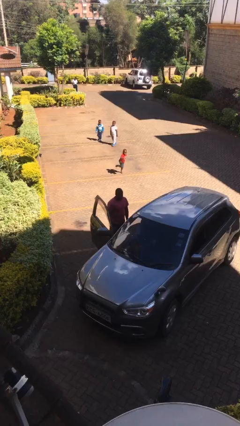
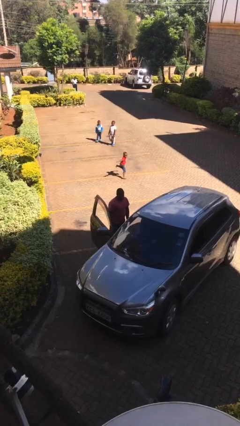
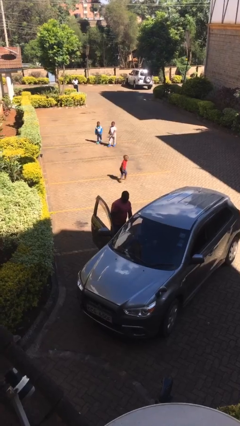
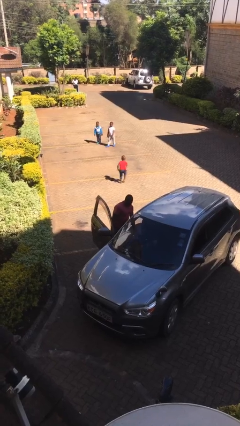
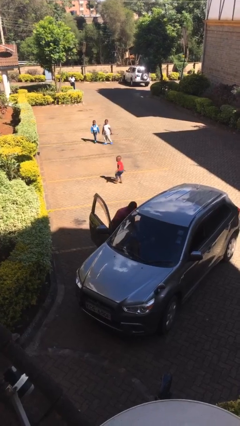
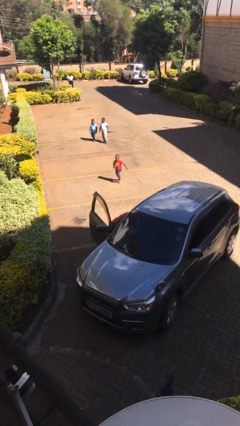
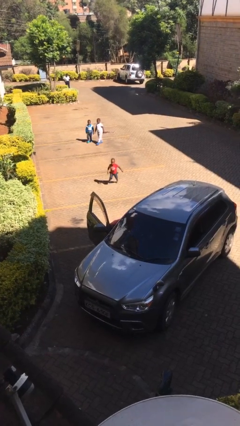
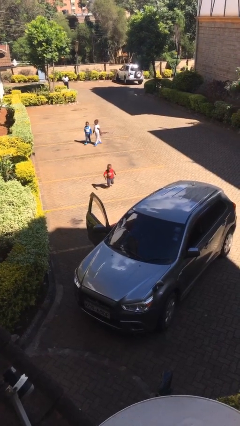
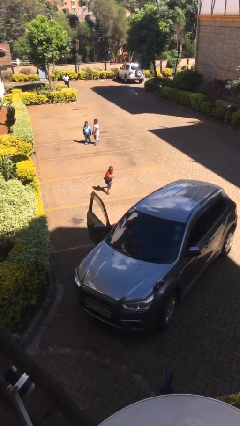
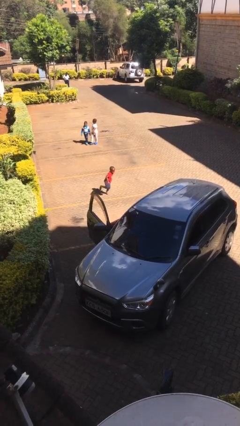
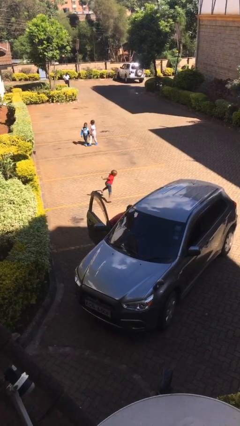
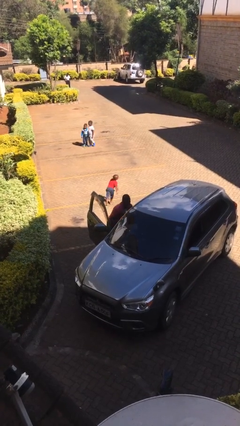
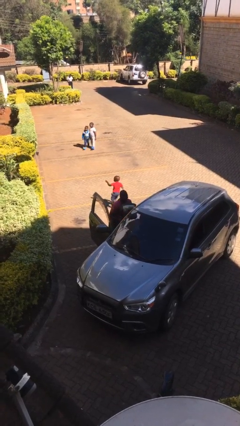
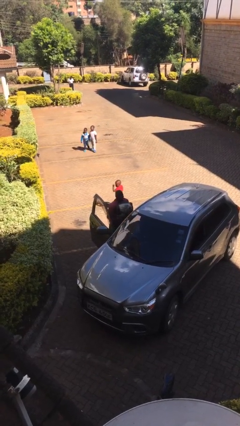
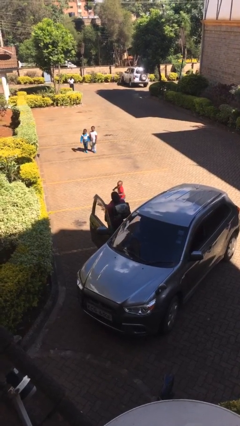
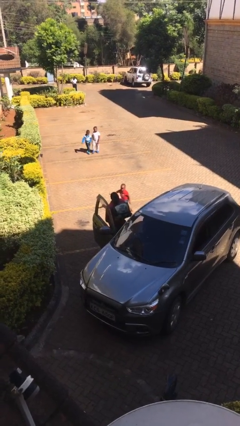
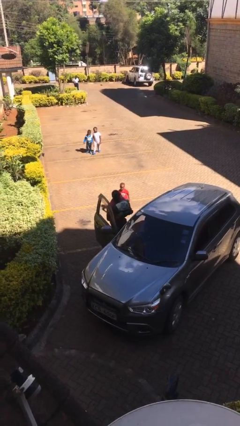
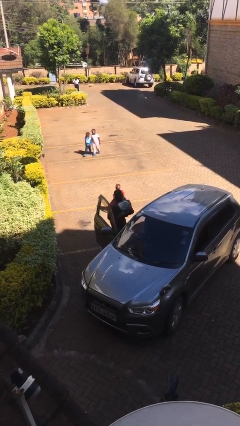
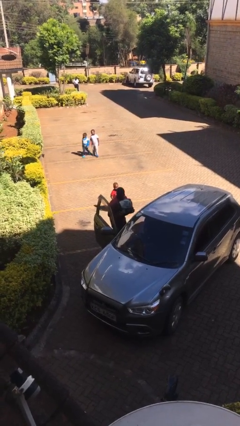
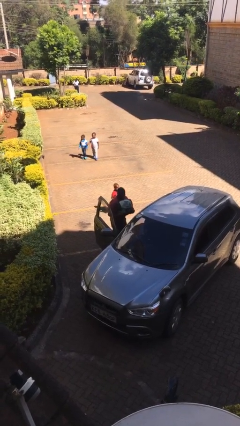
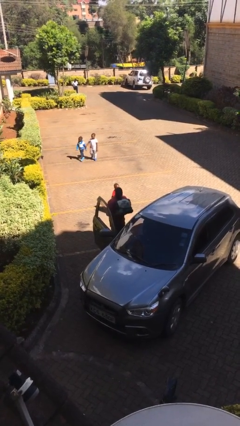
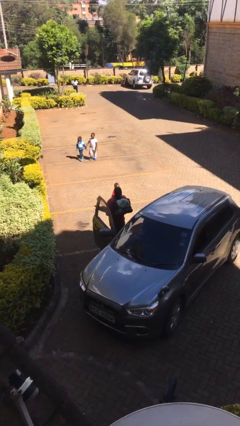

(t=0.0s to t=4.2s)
person unloads car

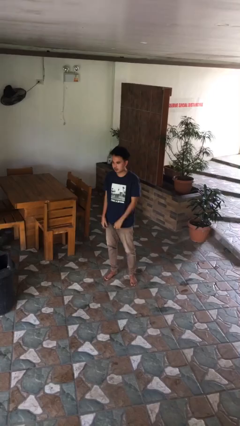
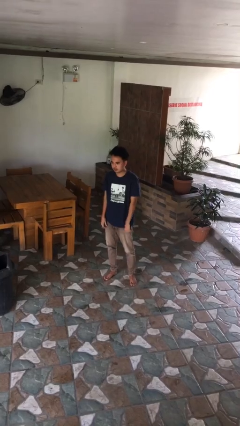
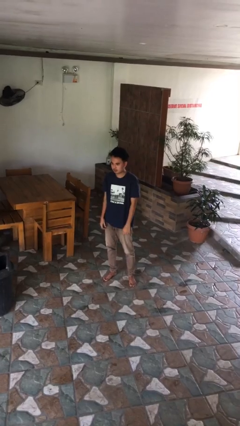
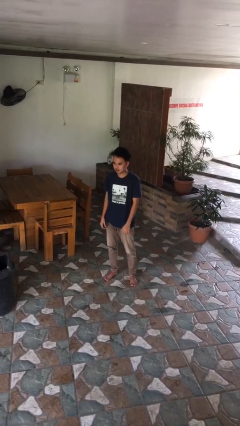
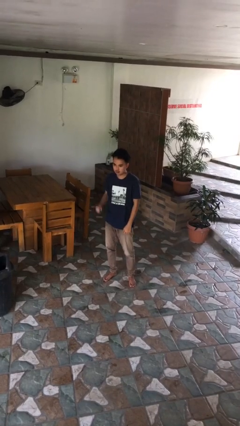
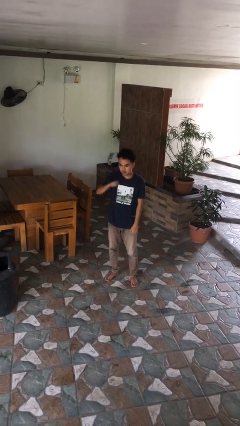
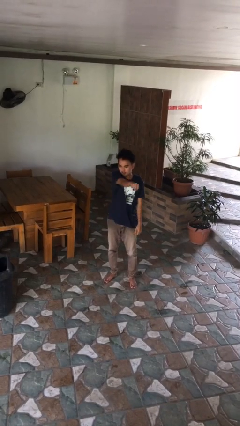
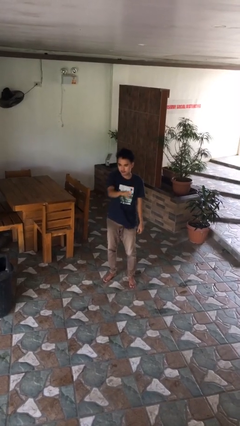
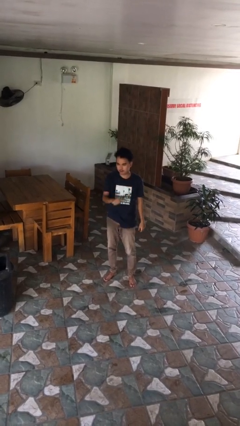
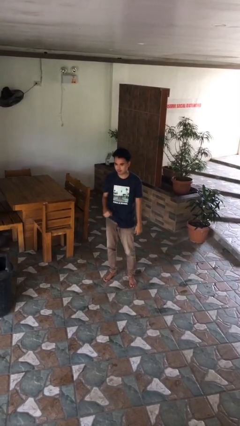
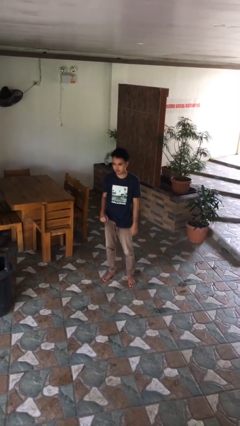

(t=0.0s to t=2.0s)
person punches

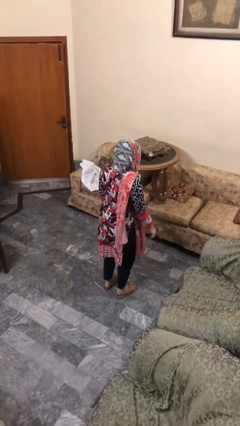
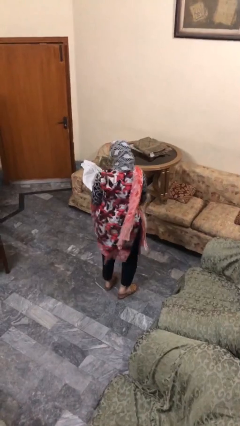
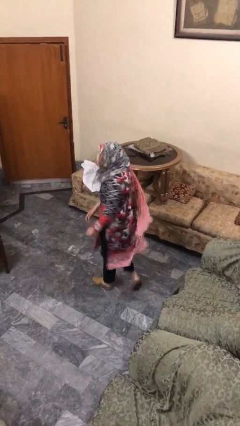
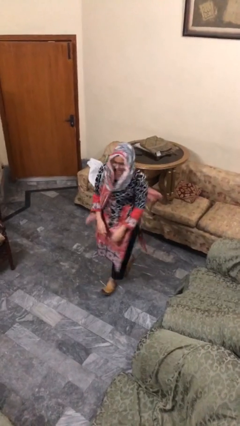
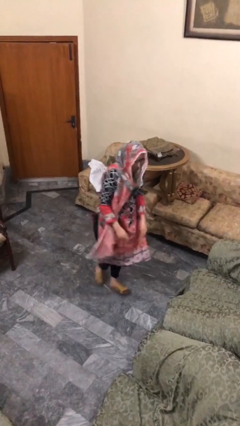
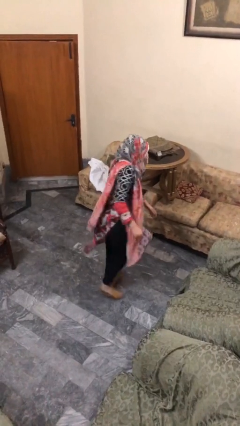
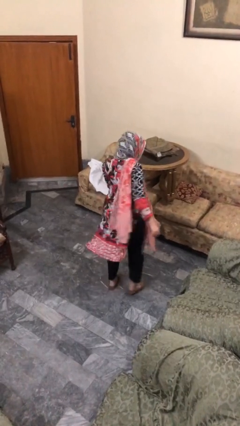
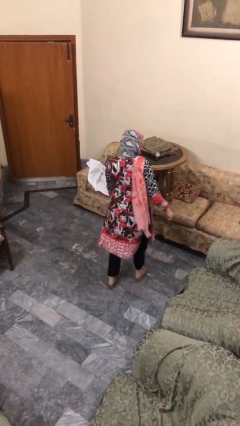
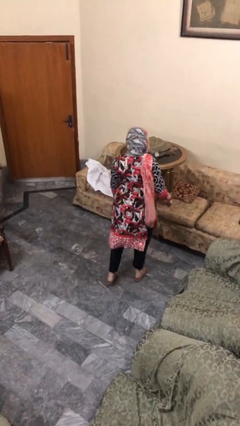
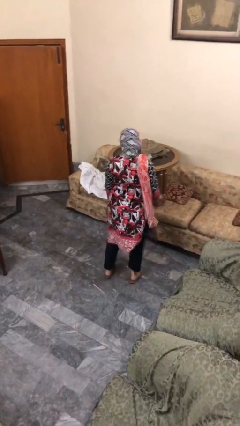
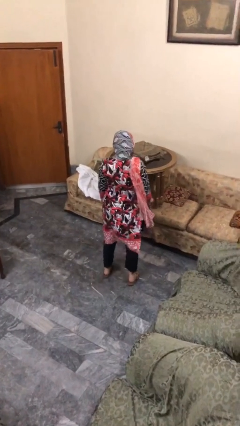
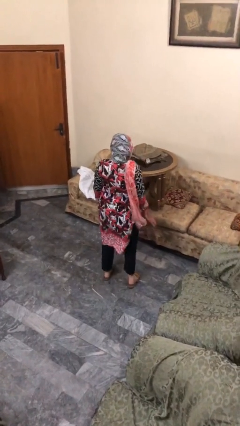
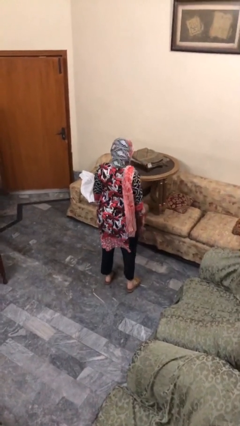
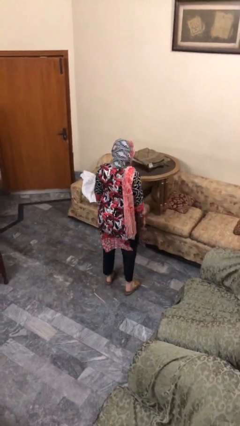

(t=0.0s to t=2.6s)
person twirls

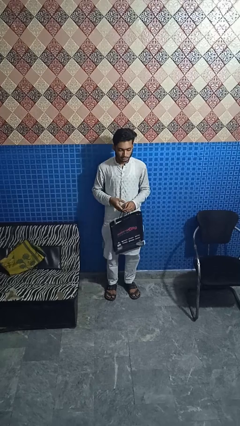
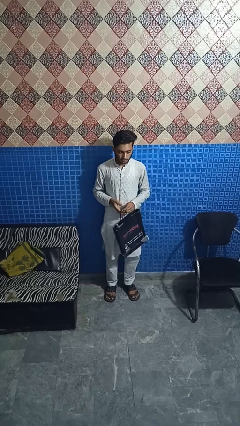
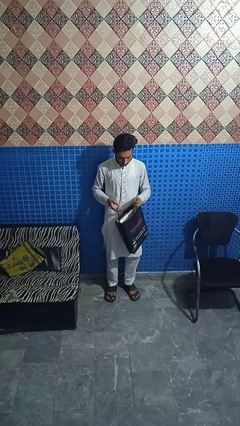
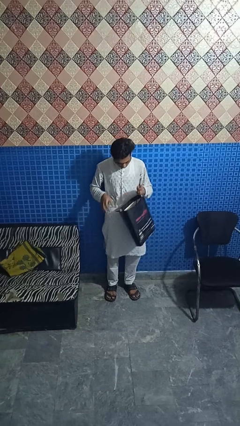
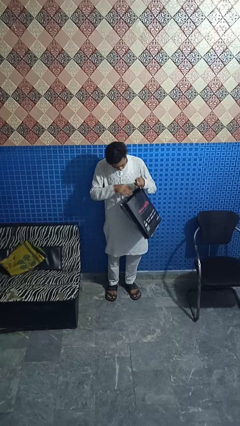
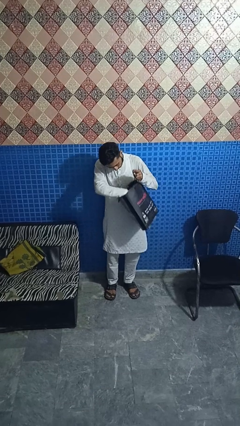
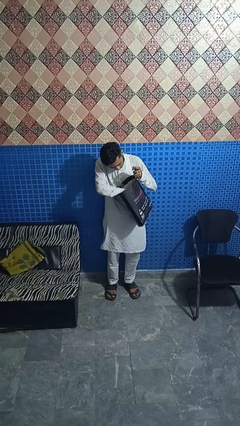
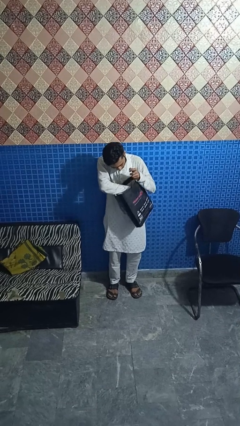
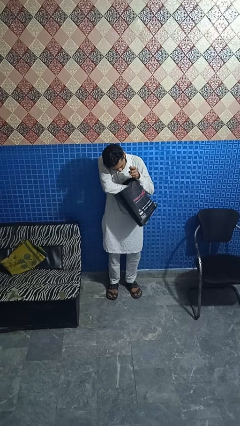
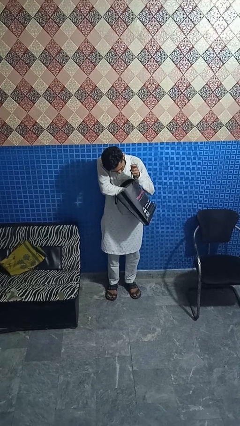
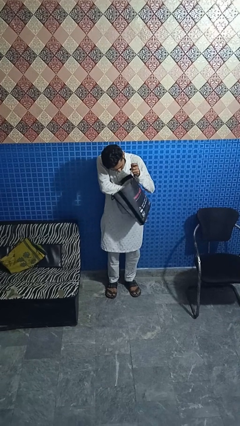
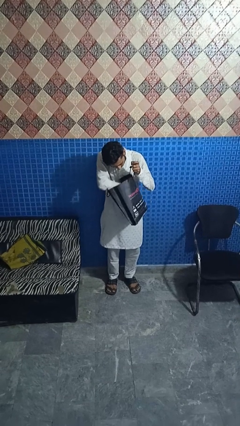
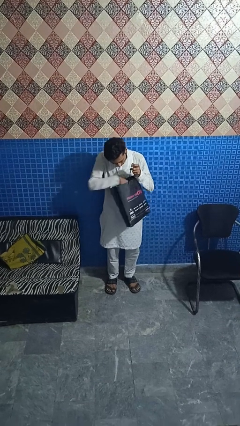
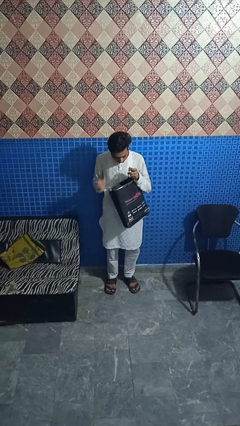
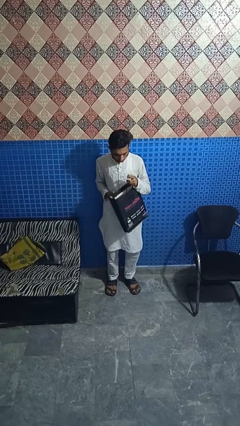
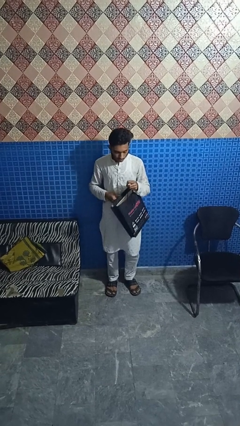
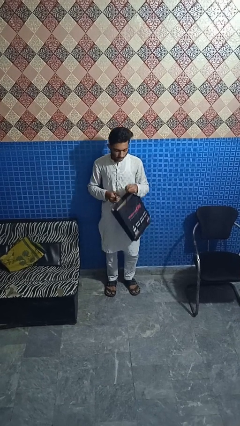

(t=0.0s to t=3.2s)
person searches in bag

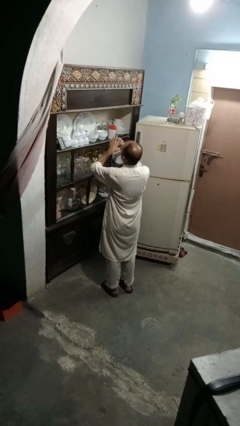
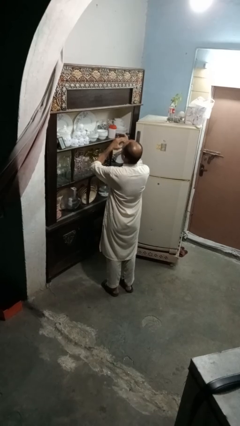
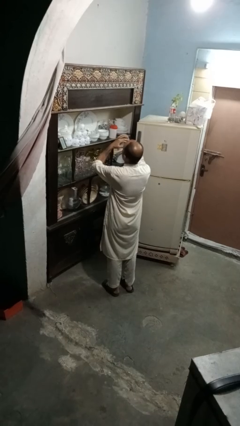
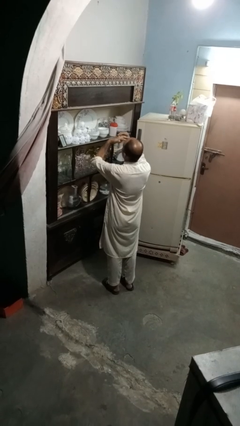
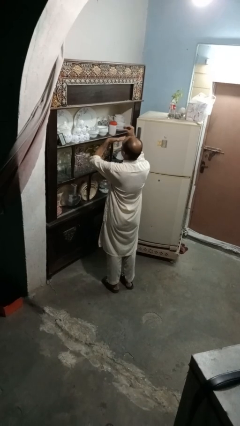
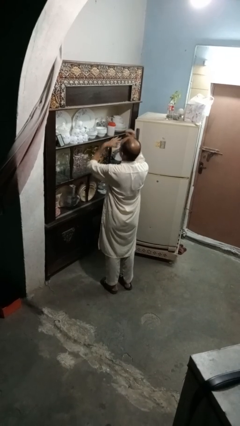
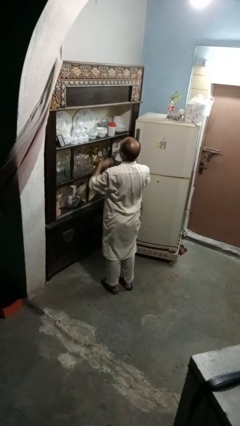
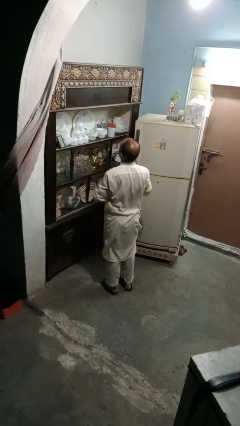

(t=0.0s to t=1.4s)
person takes off ring

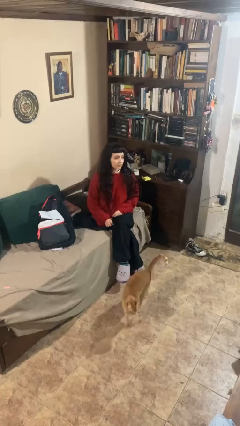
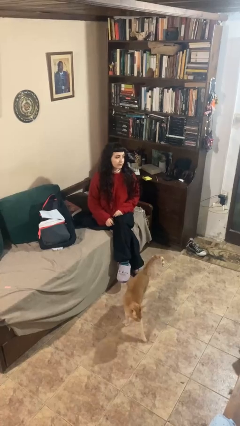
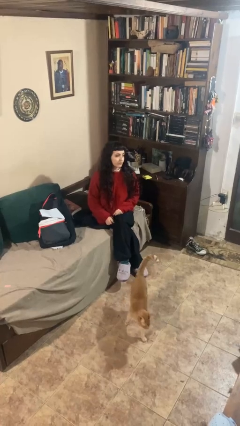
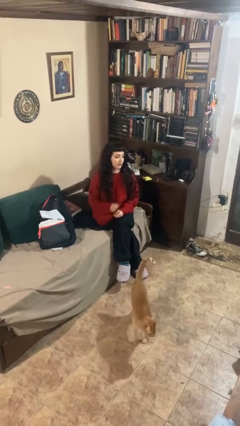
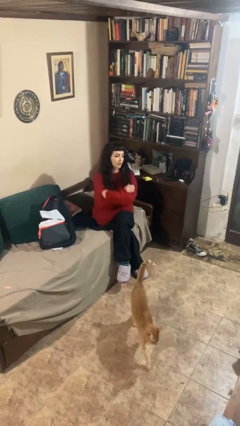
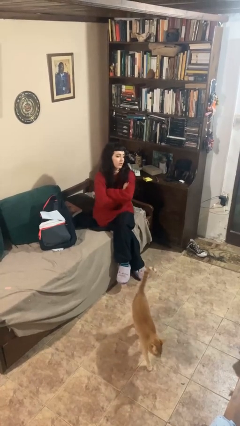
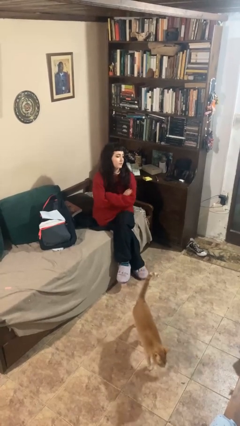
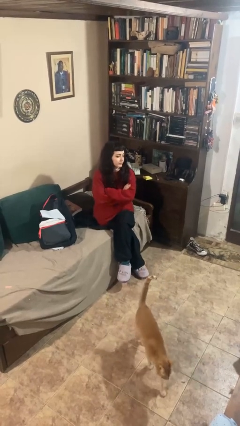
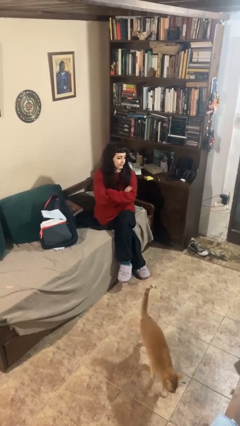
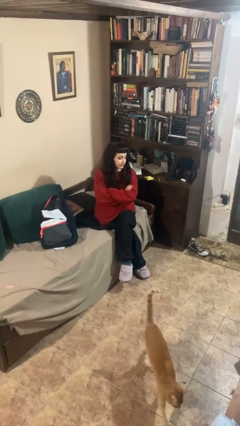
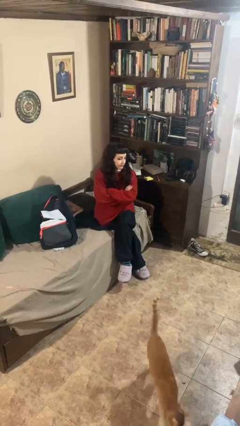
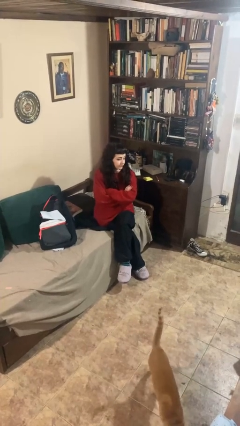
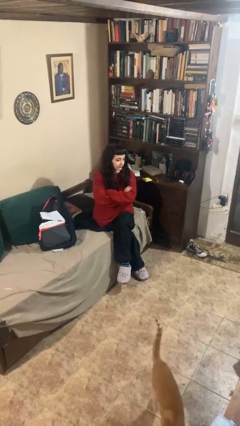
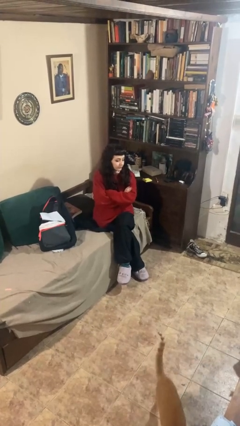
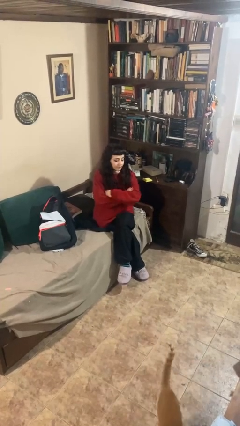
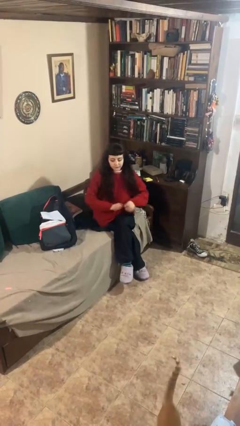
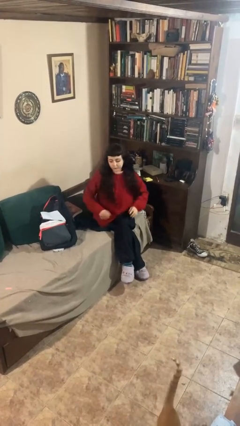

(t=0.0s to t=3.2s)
person crosses arms

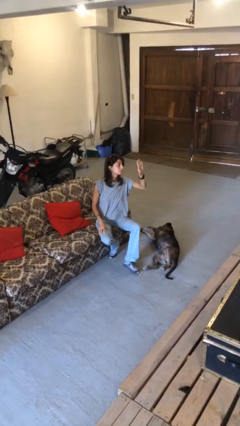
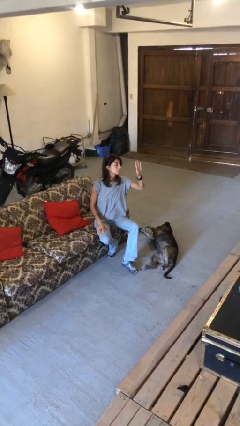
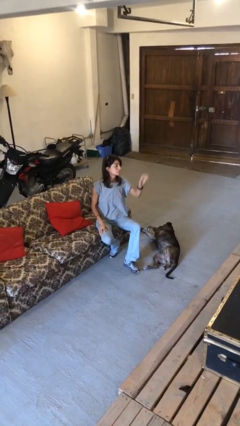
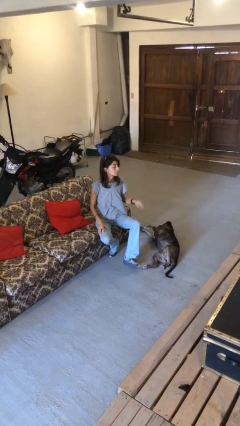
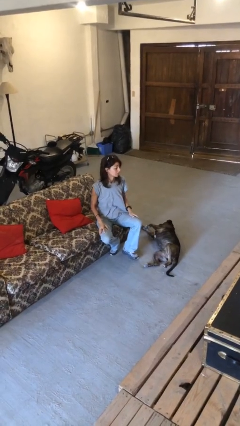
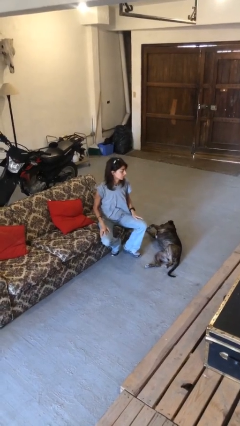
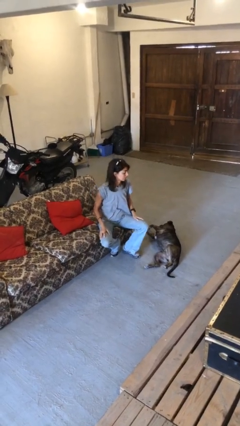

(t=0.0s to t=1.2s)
person gestures lower hand
